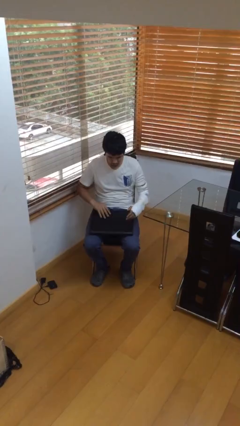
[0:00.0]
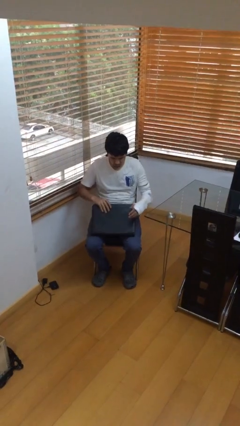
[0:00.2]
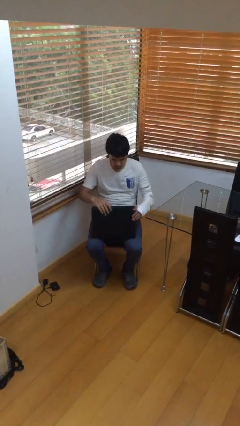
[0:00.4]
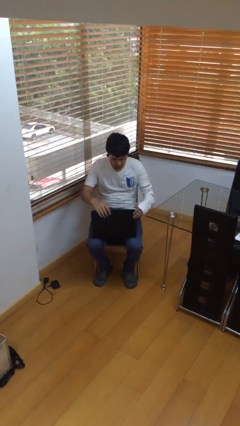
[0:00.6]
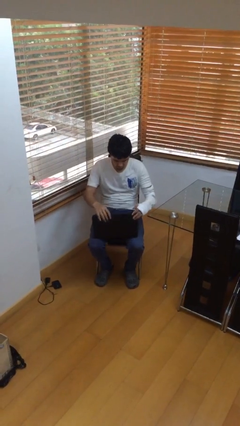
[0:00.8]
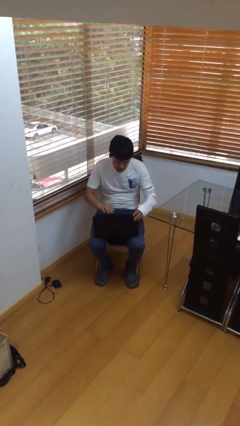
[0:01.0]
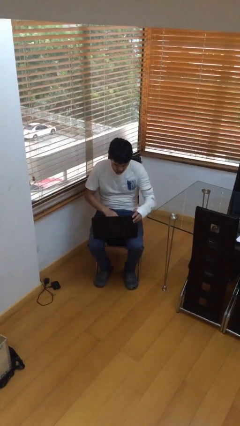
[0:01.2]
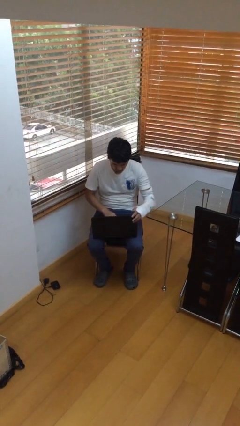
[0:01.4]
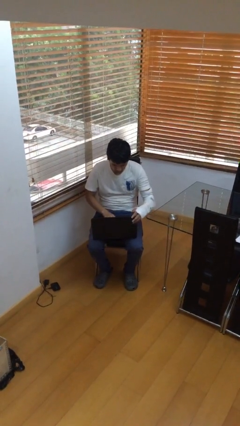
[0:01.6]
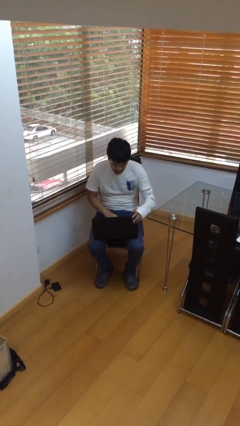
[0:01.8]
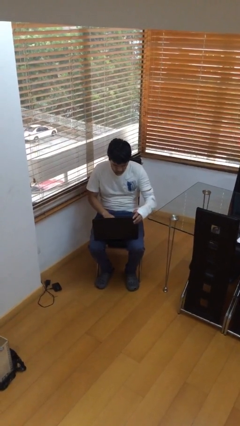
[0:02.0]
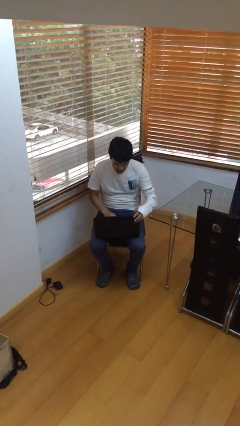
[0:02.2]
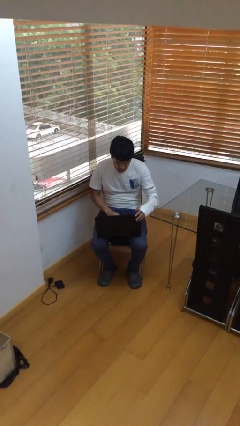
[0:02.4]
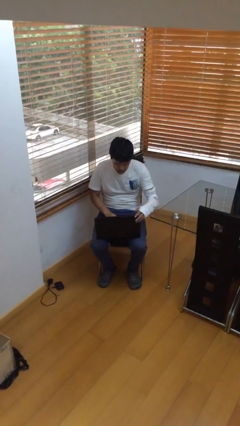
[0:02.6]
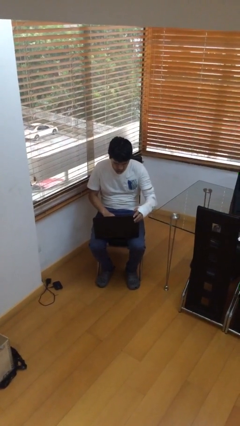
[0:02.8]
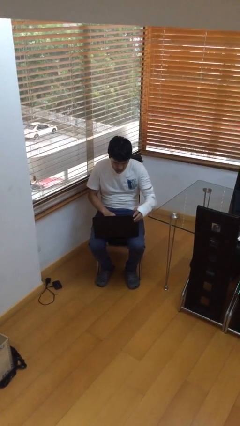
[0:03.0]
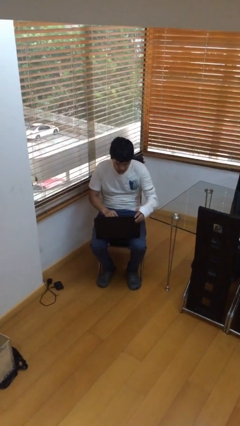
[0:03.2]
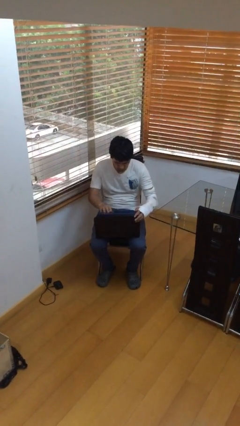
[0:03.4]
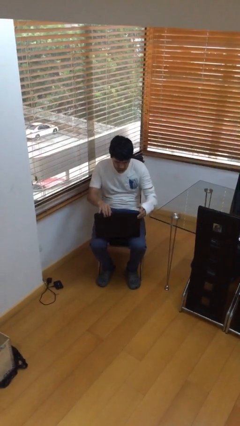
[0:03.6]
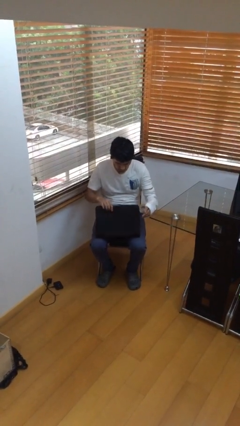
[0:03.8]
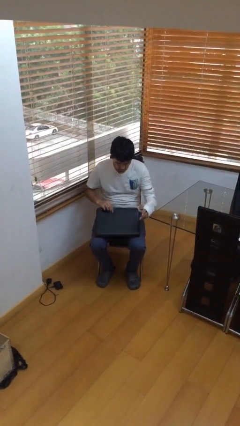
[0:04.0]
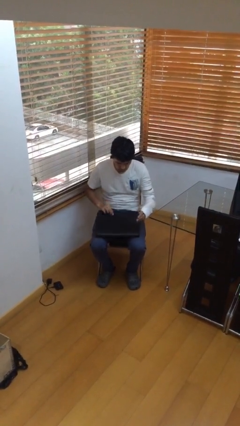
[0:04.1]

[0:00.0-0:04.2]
person interacts with laptop

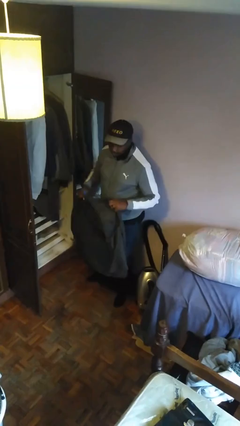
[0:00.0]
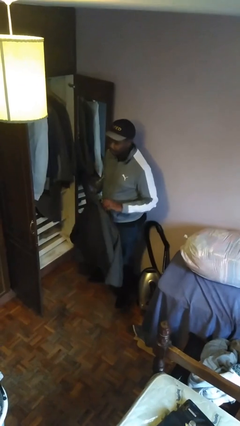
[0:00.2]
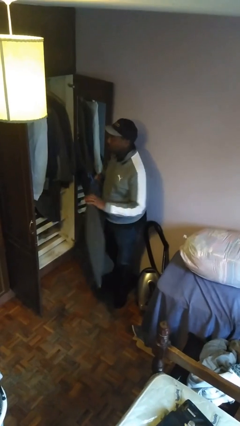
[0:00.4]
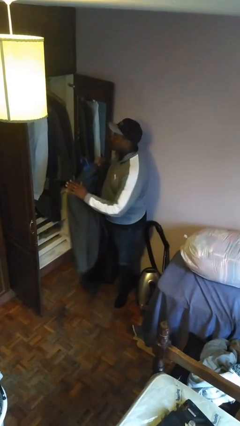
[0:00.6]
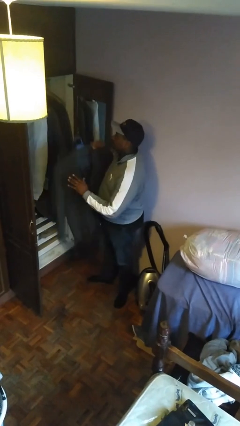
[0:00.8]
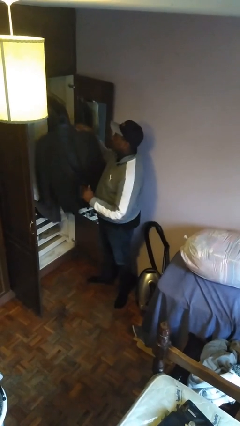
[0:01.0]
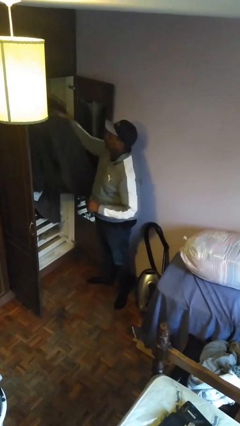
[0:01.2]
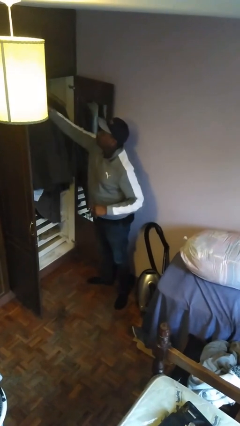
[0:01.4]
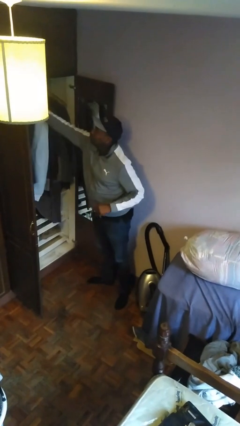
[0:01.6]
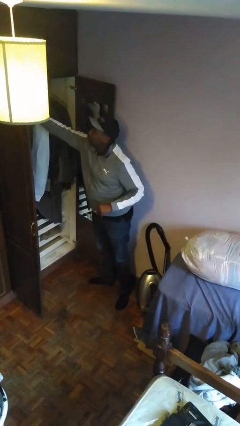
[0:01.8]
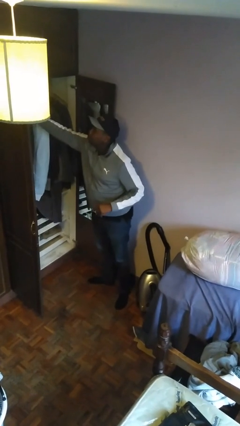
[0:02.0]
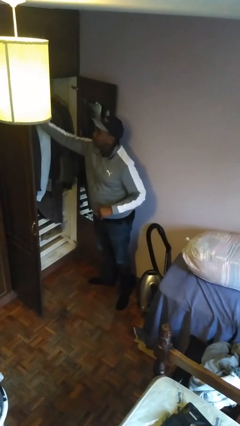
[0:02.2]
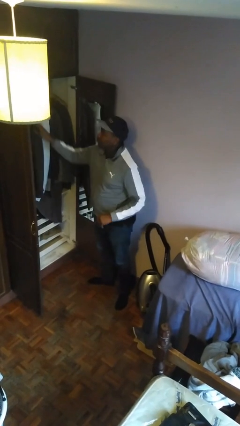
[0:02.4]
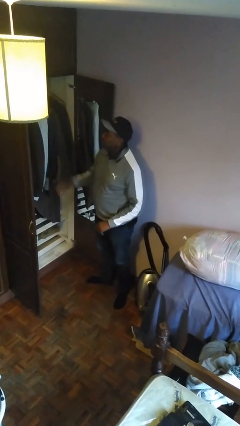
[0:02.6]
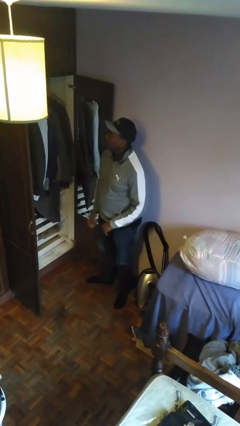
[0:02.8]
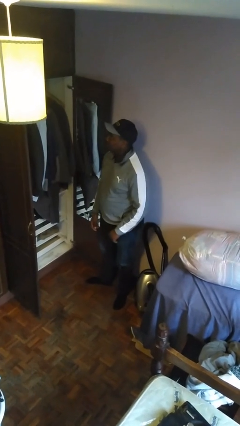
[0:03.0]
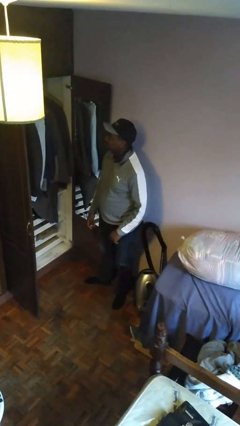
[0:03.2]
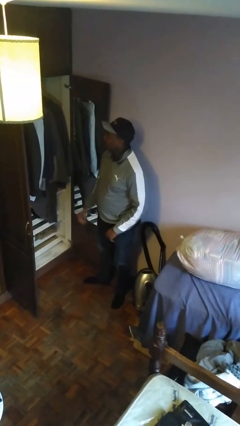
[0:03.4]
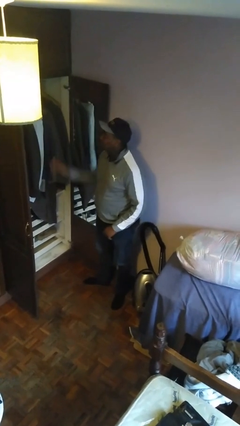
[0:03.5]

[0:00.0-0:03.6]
person puts clothes into closet

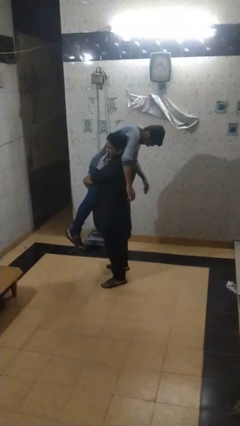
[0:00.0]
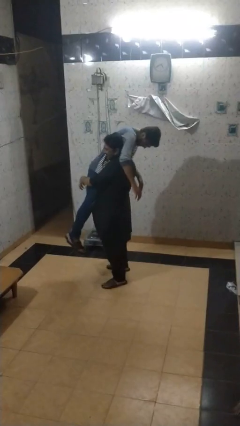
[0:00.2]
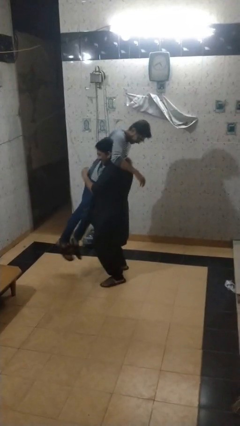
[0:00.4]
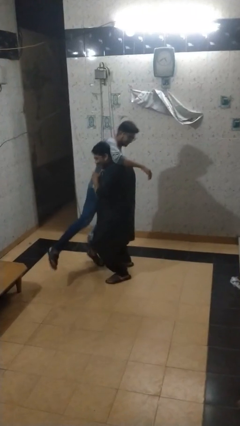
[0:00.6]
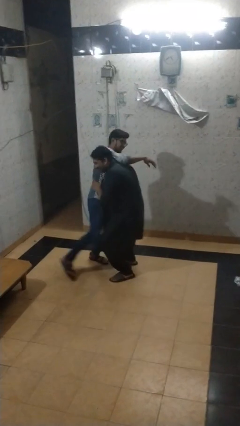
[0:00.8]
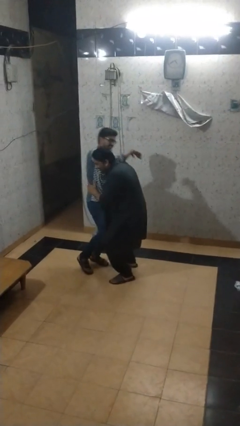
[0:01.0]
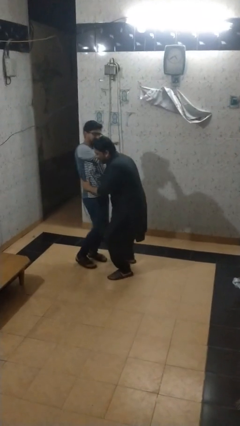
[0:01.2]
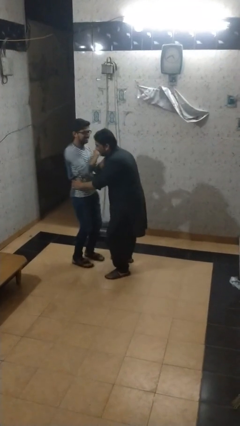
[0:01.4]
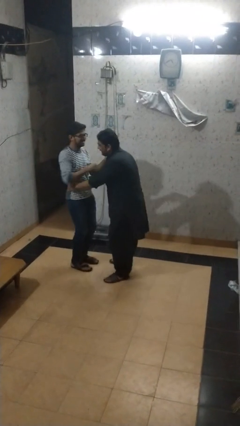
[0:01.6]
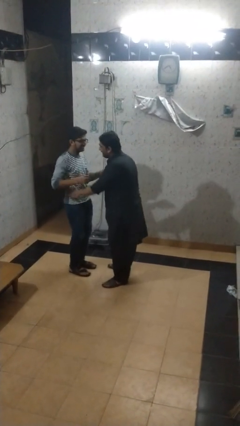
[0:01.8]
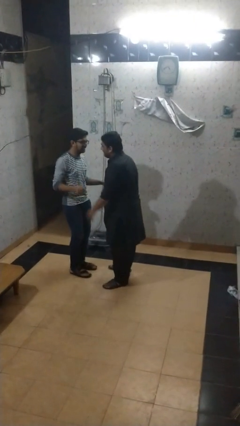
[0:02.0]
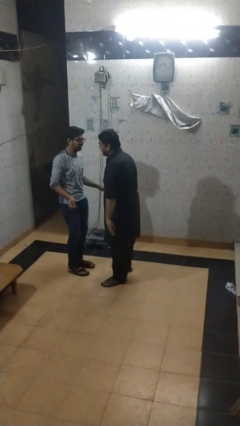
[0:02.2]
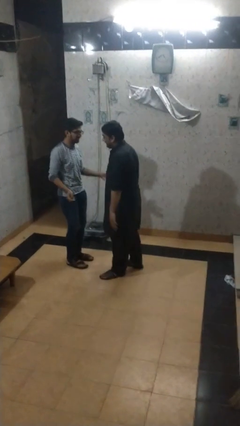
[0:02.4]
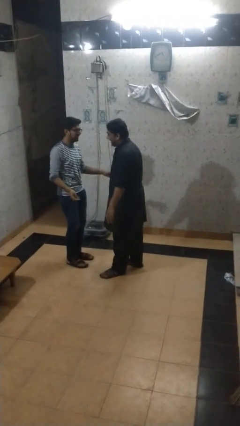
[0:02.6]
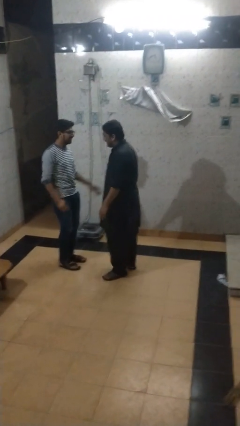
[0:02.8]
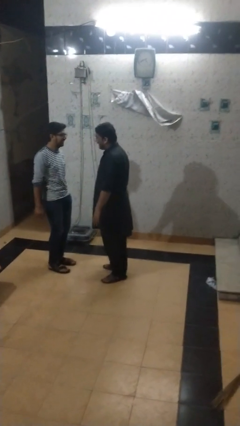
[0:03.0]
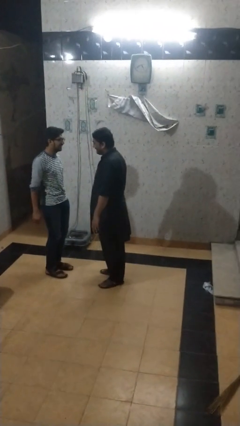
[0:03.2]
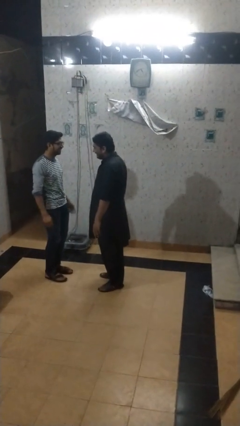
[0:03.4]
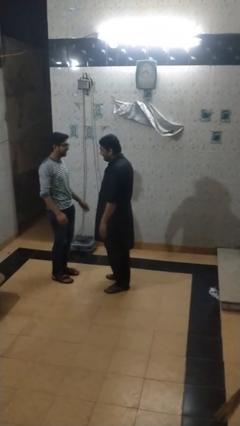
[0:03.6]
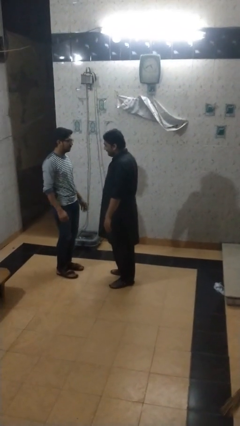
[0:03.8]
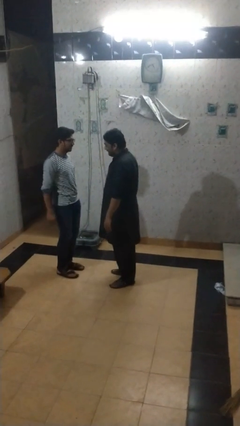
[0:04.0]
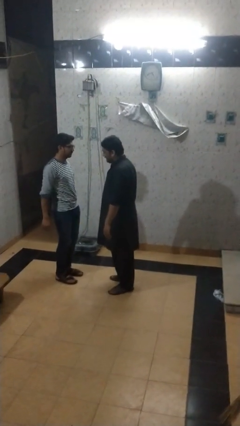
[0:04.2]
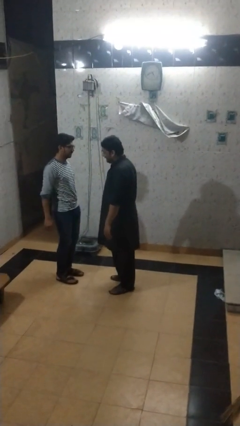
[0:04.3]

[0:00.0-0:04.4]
person puts down person

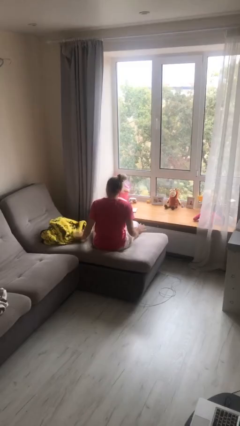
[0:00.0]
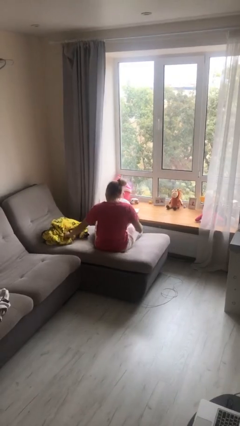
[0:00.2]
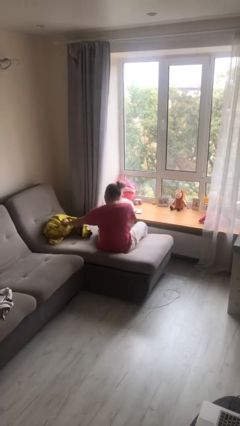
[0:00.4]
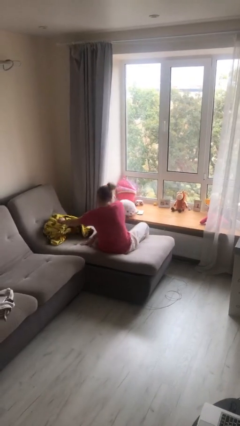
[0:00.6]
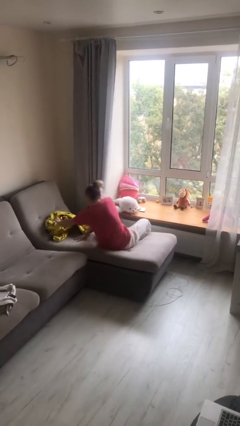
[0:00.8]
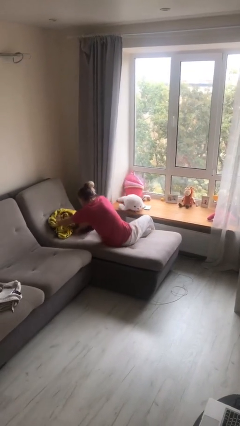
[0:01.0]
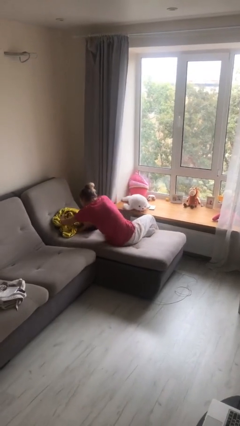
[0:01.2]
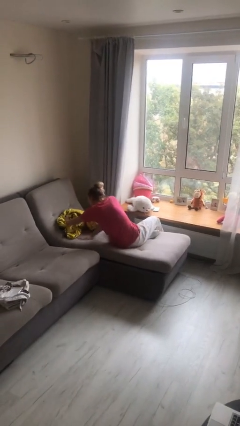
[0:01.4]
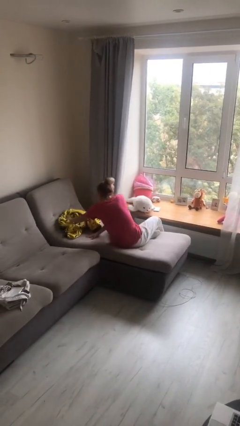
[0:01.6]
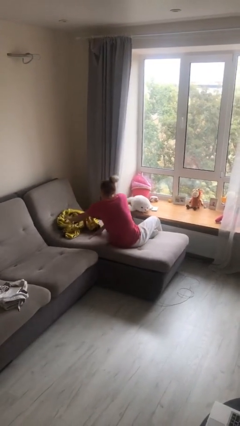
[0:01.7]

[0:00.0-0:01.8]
person searches in couch

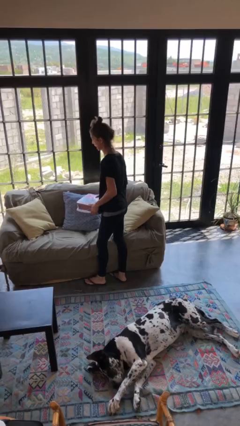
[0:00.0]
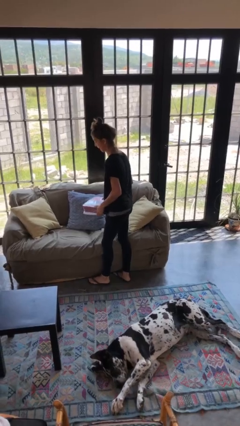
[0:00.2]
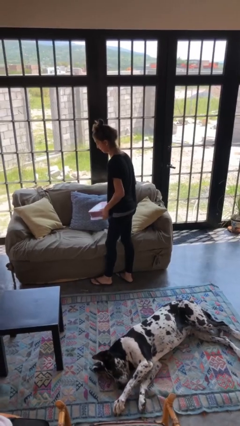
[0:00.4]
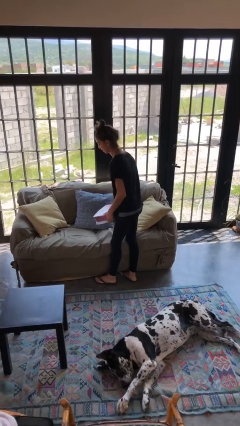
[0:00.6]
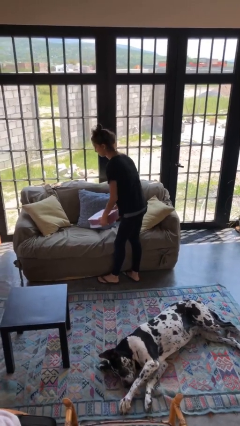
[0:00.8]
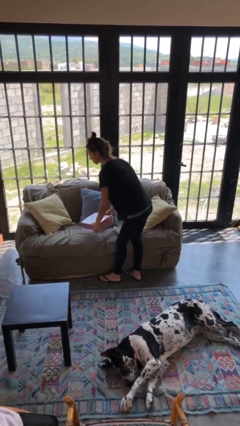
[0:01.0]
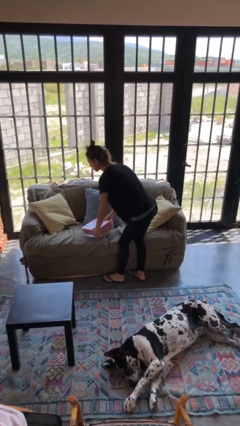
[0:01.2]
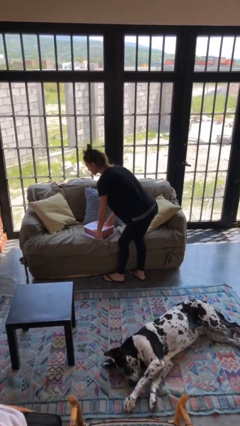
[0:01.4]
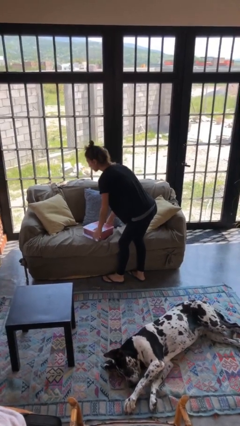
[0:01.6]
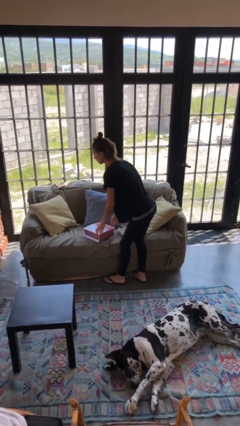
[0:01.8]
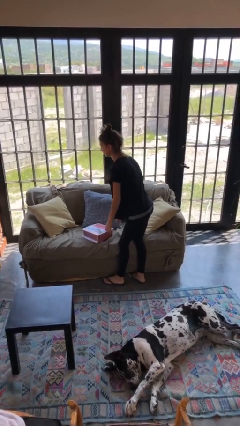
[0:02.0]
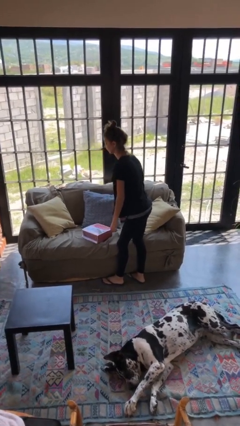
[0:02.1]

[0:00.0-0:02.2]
person puts down object on couch

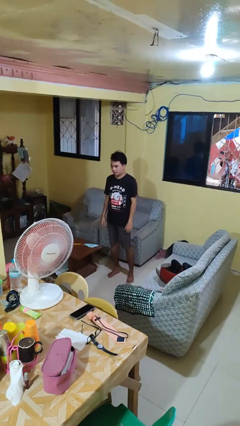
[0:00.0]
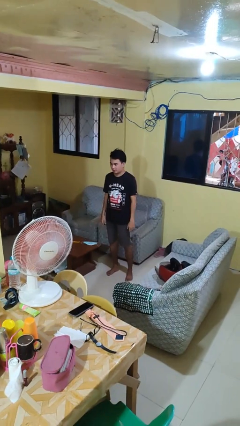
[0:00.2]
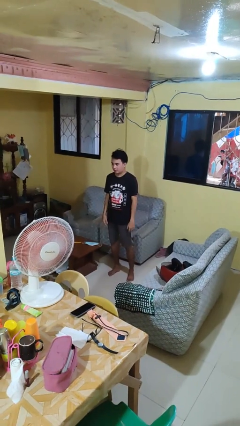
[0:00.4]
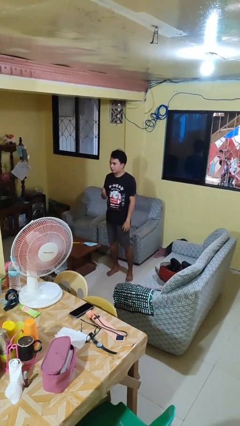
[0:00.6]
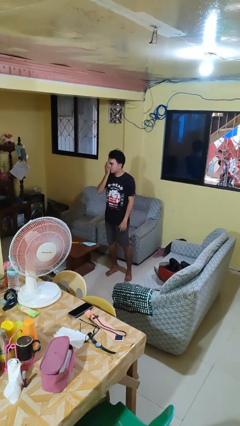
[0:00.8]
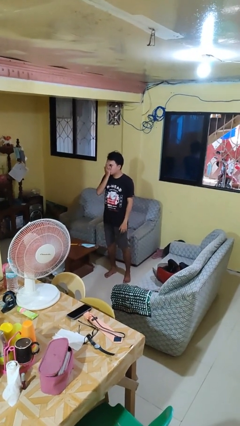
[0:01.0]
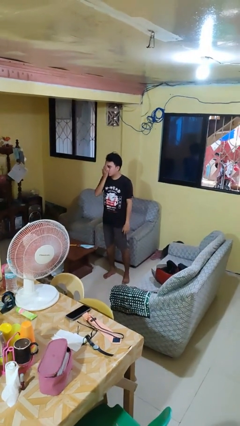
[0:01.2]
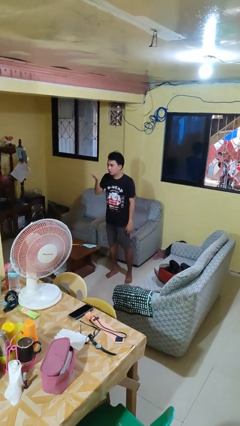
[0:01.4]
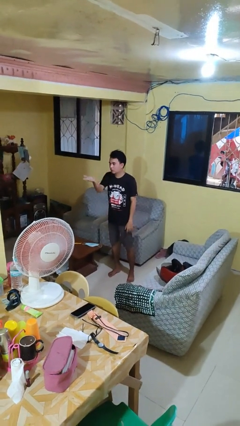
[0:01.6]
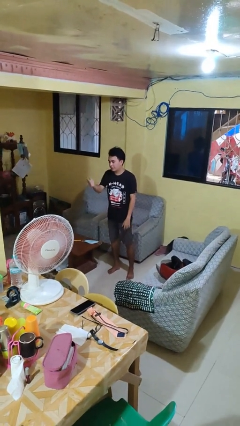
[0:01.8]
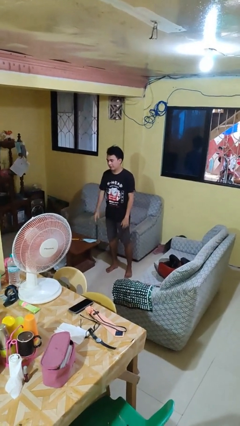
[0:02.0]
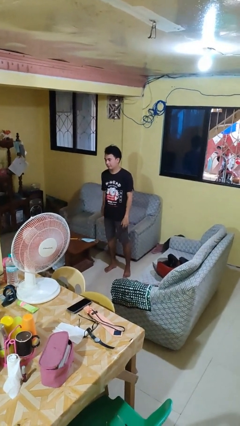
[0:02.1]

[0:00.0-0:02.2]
person gestures blow kiss
